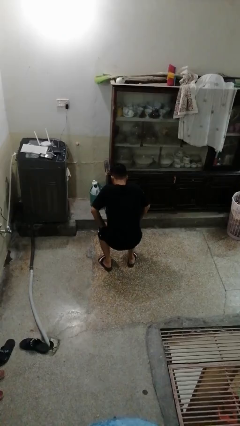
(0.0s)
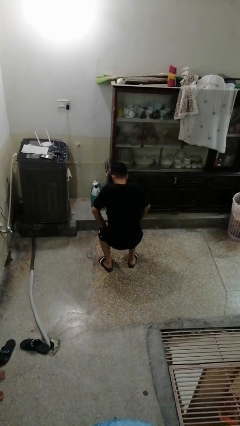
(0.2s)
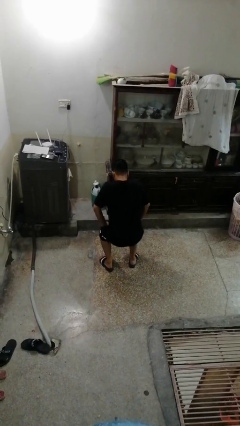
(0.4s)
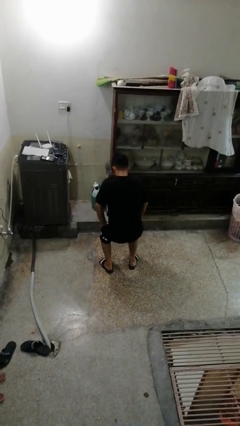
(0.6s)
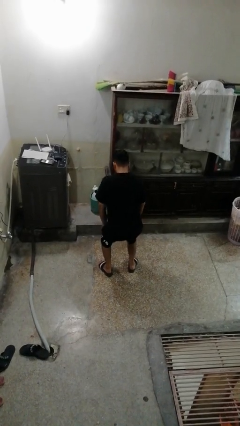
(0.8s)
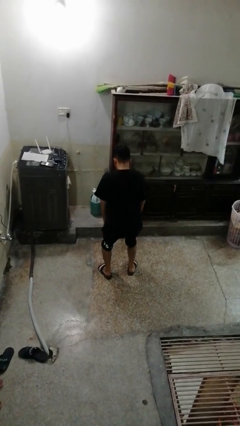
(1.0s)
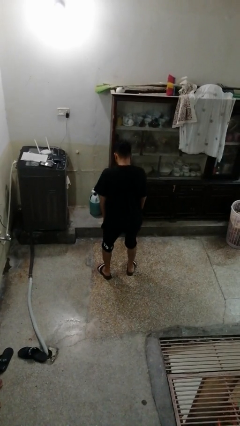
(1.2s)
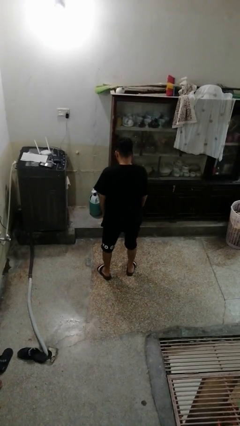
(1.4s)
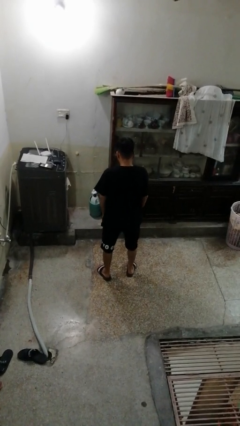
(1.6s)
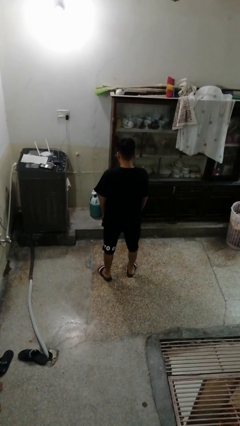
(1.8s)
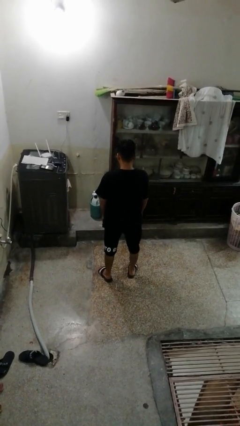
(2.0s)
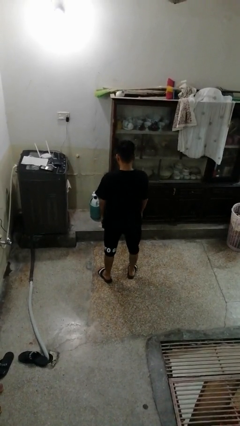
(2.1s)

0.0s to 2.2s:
person stands up

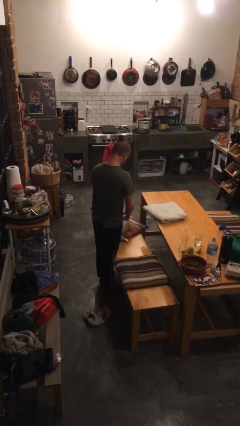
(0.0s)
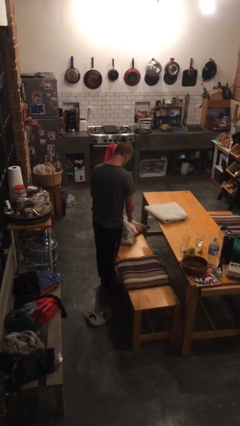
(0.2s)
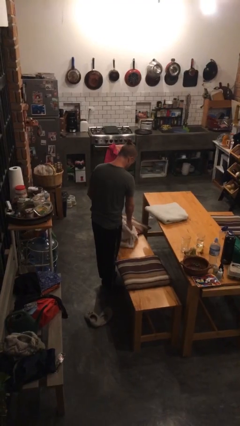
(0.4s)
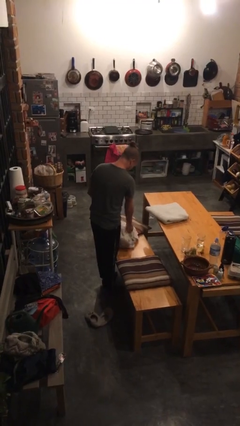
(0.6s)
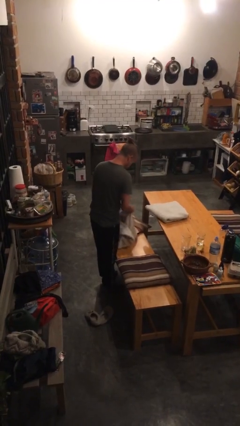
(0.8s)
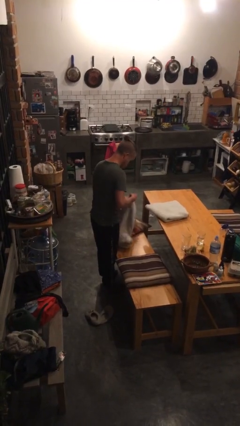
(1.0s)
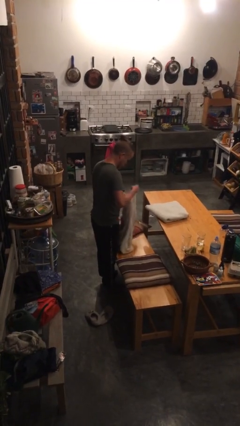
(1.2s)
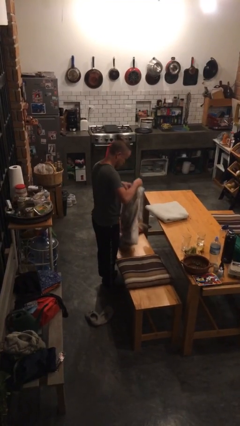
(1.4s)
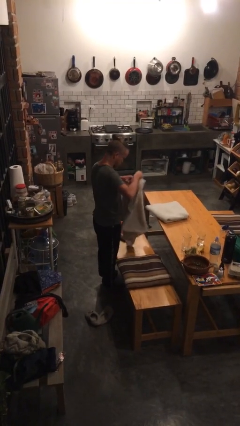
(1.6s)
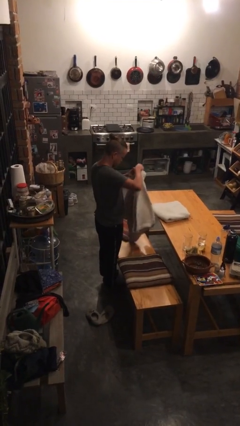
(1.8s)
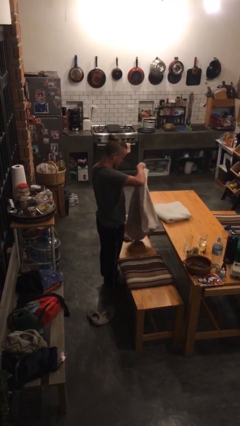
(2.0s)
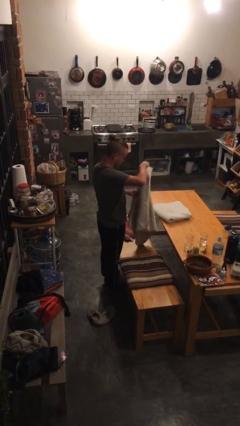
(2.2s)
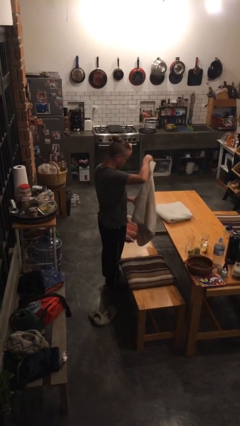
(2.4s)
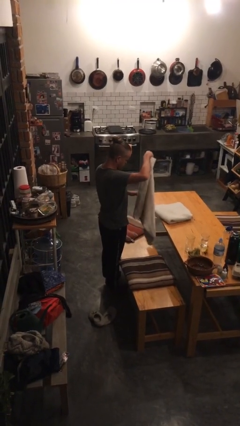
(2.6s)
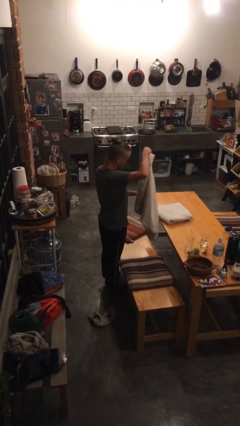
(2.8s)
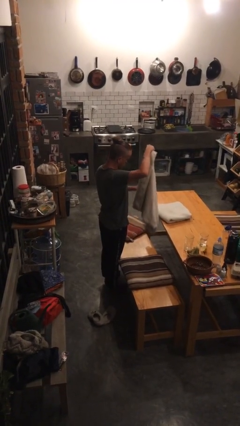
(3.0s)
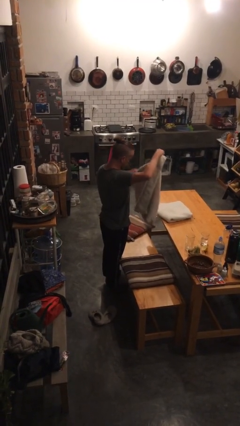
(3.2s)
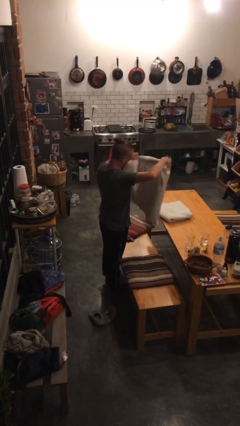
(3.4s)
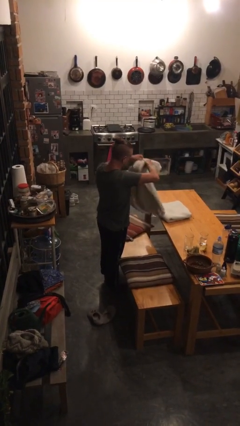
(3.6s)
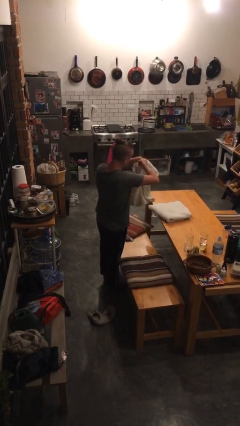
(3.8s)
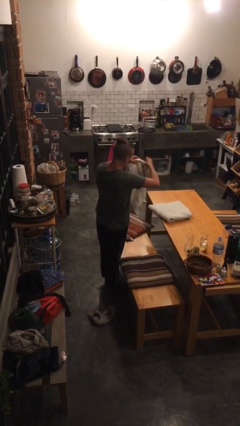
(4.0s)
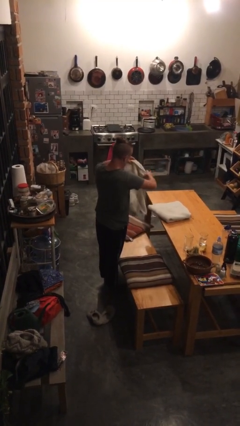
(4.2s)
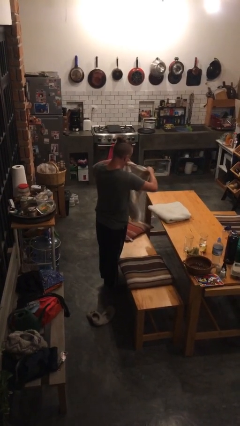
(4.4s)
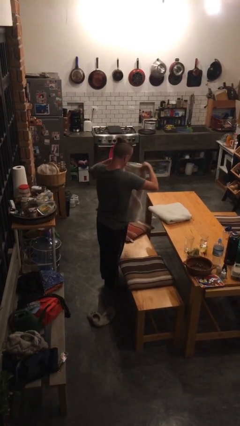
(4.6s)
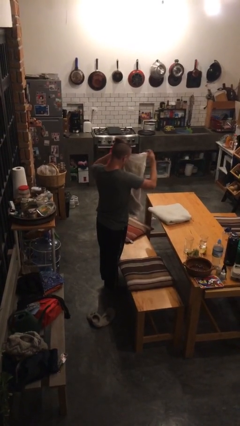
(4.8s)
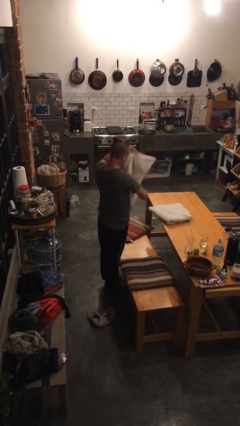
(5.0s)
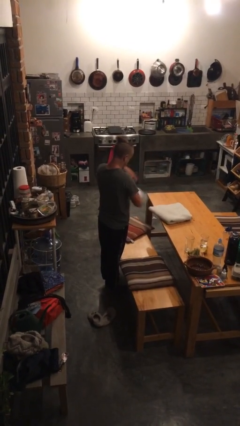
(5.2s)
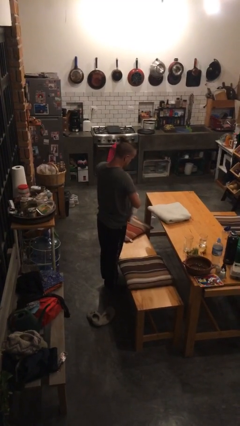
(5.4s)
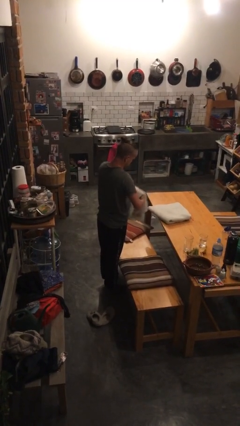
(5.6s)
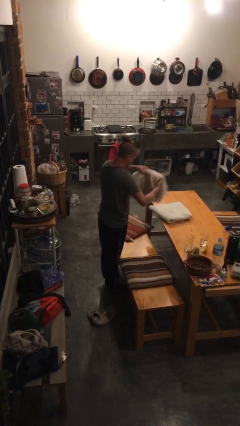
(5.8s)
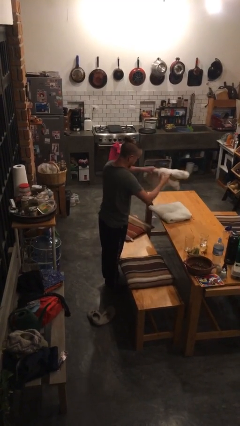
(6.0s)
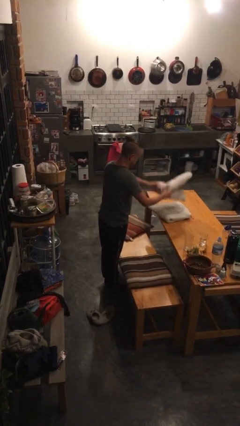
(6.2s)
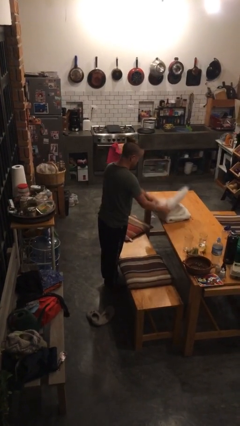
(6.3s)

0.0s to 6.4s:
person folds towel

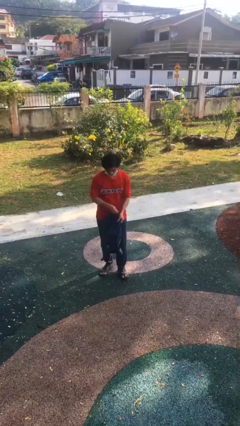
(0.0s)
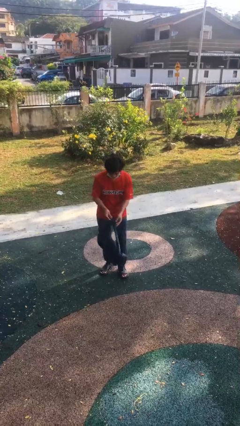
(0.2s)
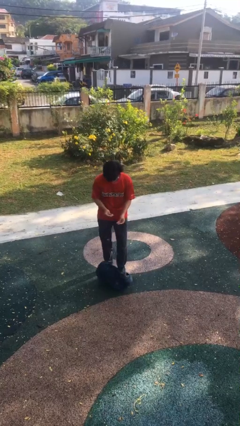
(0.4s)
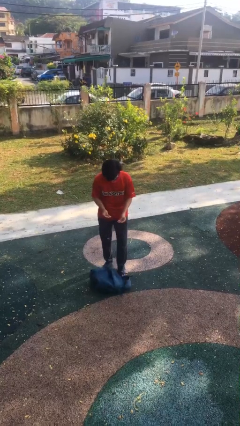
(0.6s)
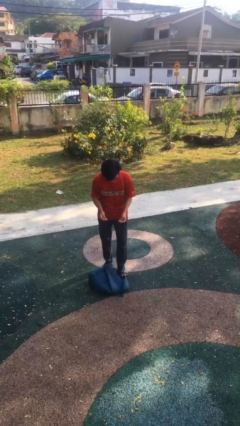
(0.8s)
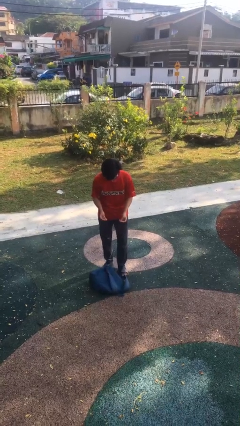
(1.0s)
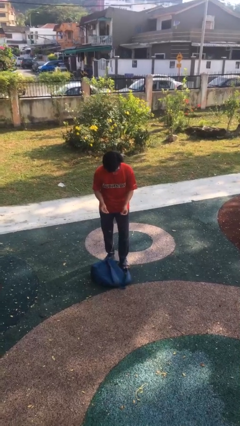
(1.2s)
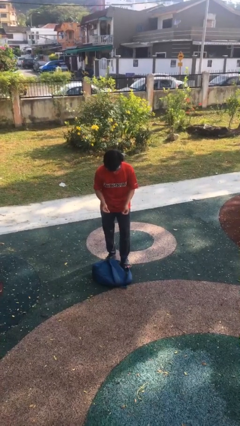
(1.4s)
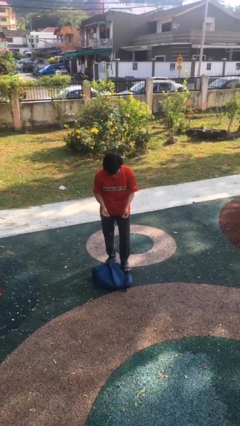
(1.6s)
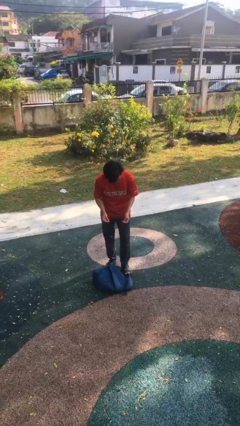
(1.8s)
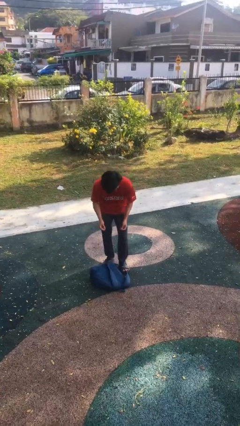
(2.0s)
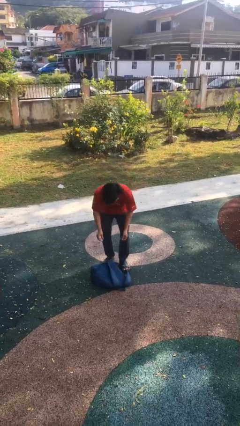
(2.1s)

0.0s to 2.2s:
person drops object

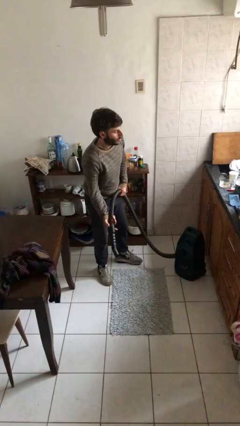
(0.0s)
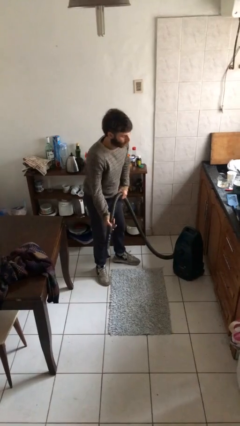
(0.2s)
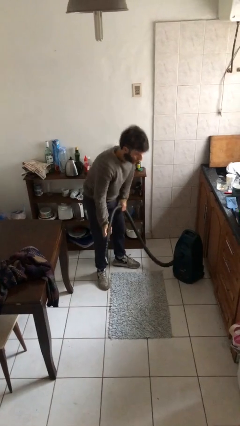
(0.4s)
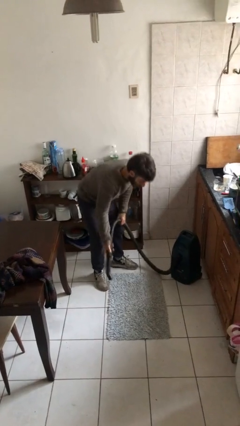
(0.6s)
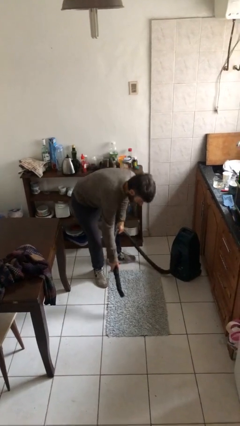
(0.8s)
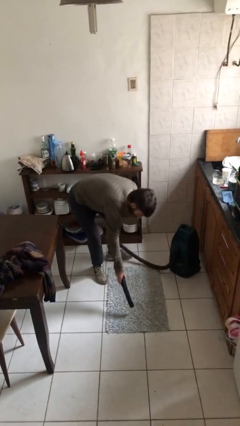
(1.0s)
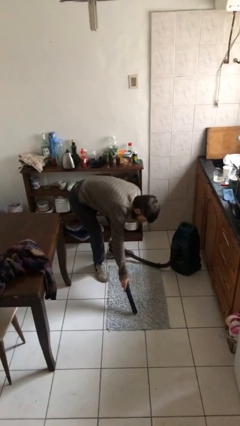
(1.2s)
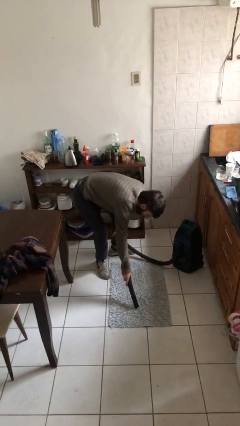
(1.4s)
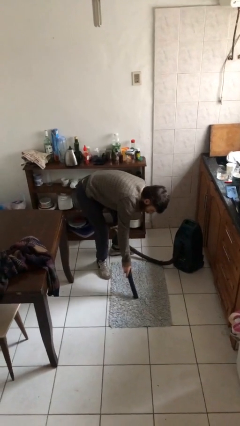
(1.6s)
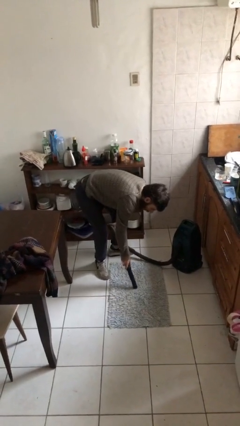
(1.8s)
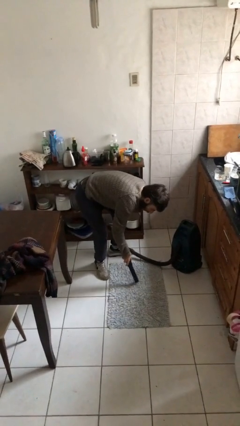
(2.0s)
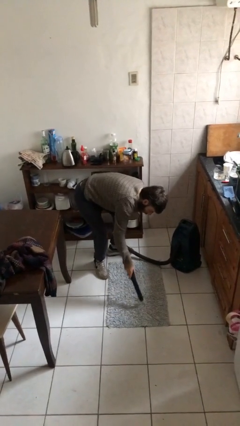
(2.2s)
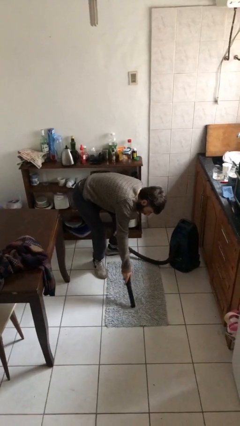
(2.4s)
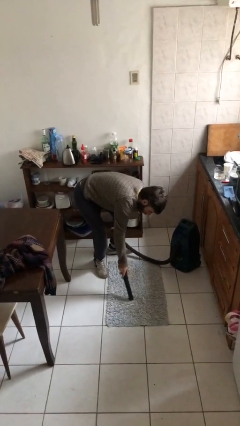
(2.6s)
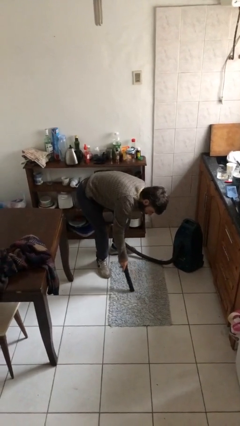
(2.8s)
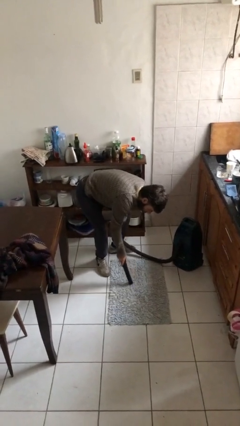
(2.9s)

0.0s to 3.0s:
person vacuums carpet

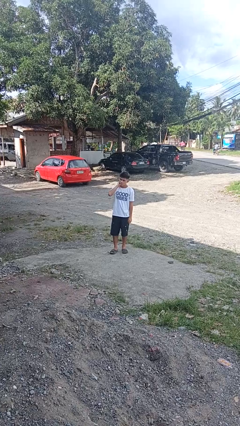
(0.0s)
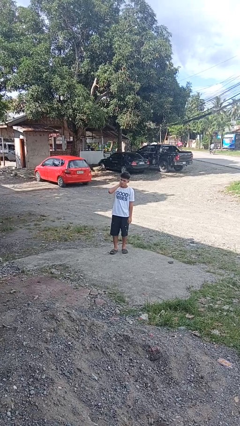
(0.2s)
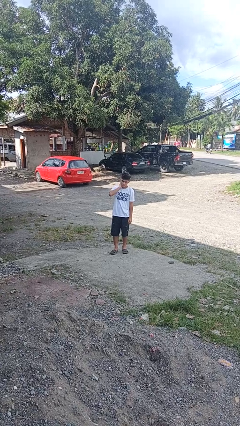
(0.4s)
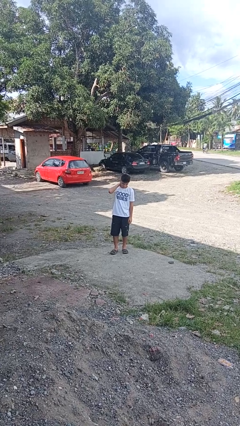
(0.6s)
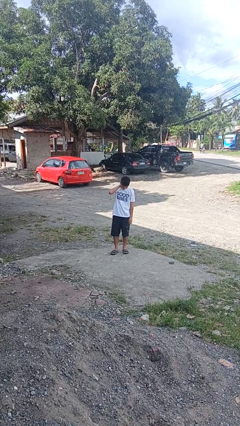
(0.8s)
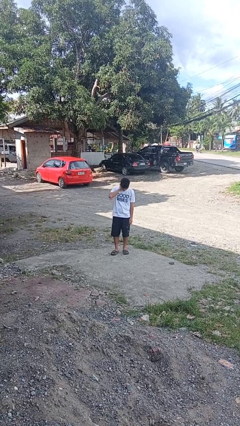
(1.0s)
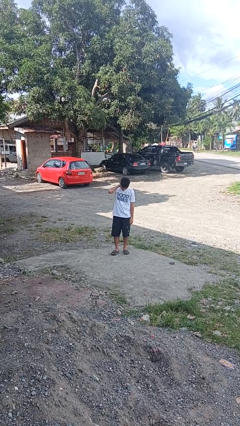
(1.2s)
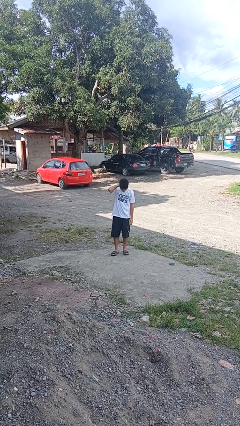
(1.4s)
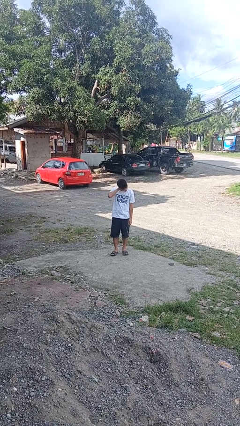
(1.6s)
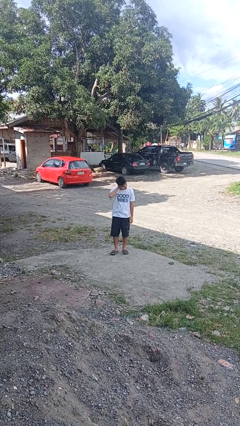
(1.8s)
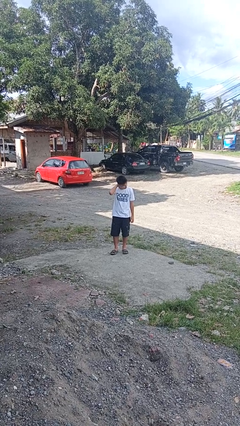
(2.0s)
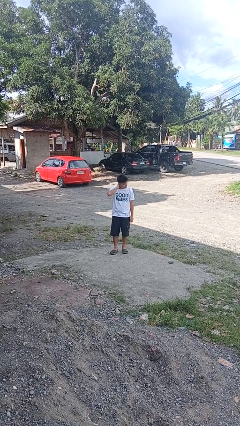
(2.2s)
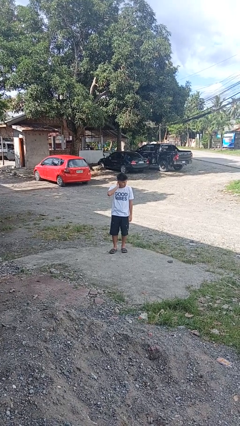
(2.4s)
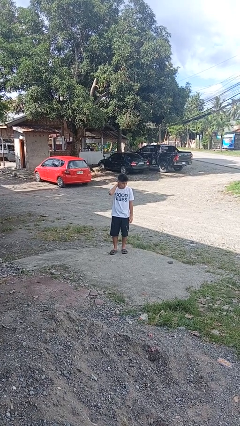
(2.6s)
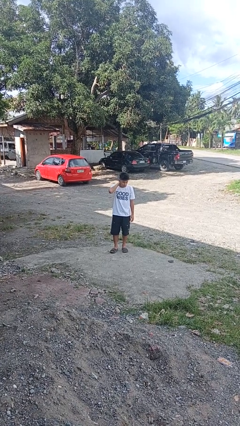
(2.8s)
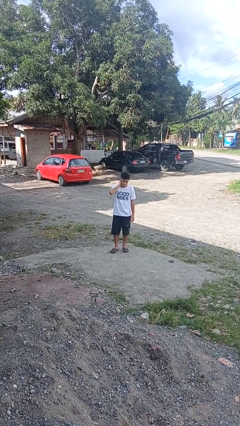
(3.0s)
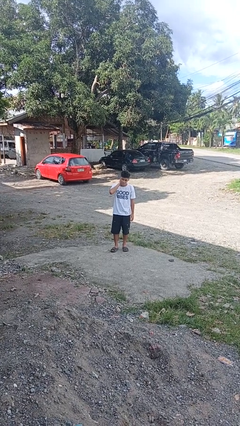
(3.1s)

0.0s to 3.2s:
person rubs neck

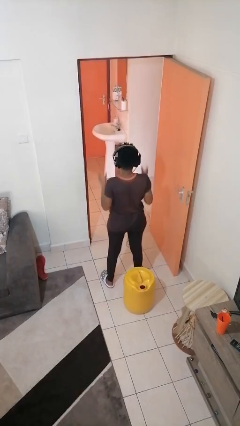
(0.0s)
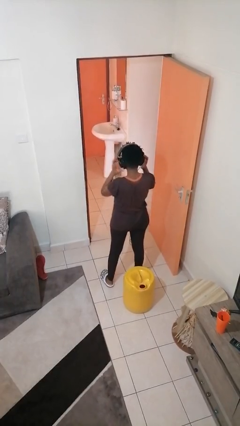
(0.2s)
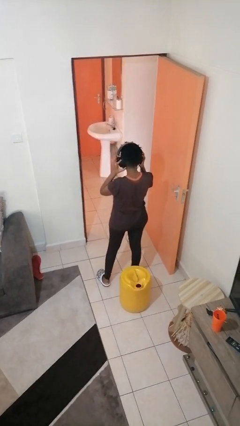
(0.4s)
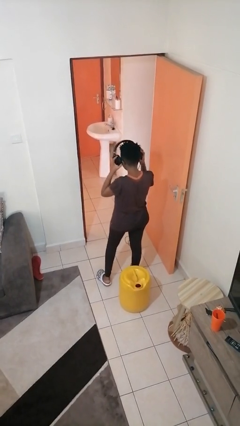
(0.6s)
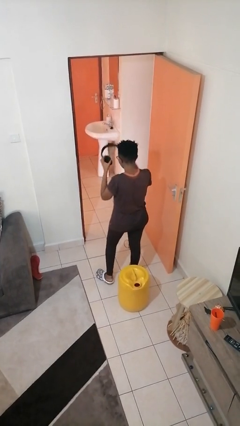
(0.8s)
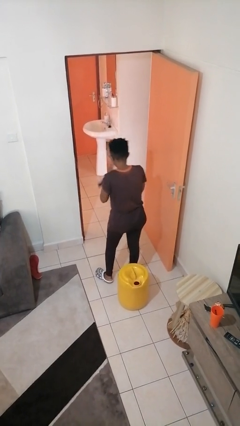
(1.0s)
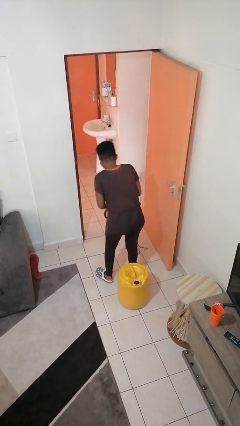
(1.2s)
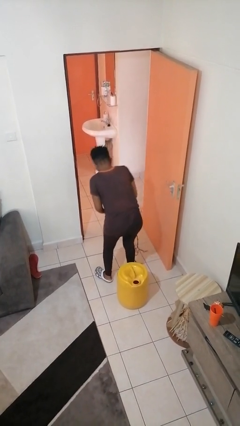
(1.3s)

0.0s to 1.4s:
person takes off headphones
